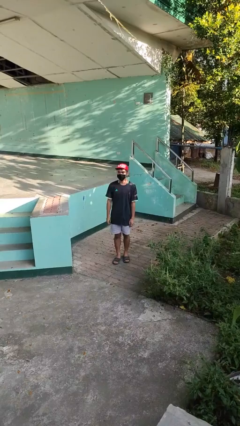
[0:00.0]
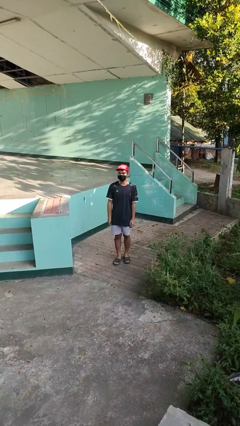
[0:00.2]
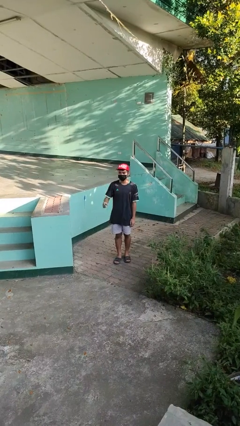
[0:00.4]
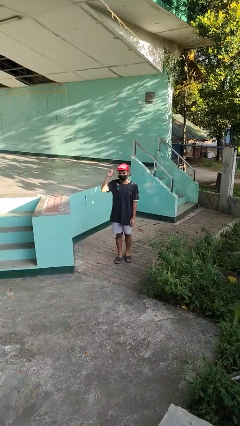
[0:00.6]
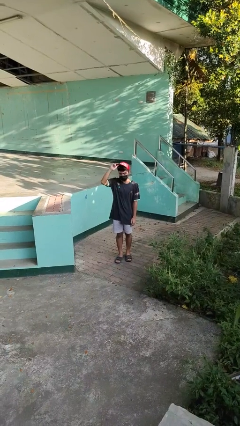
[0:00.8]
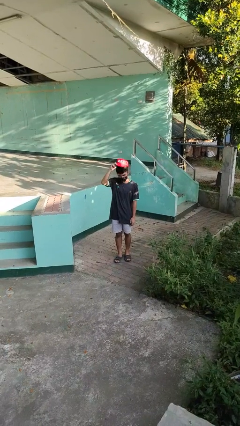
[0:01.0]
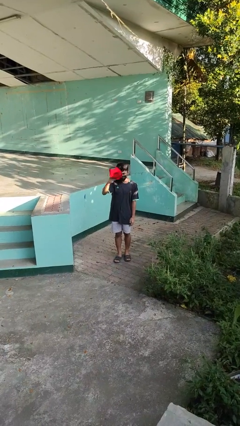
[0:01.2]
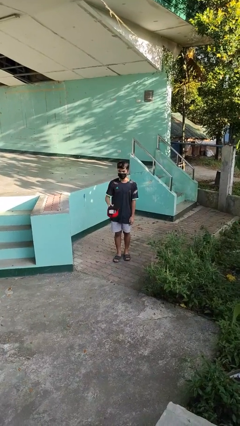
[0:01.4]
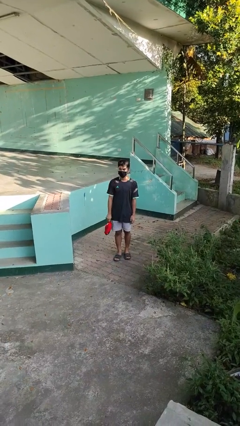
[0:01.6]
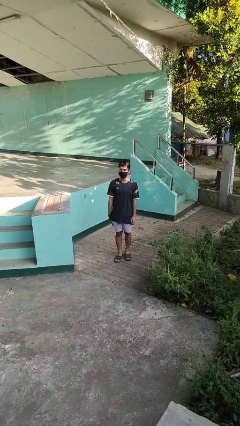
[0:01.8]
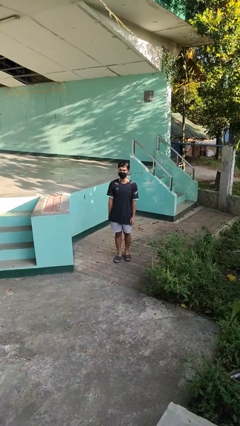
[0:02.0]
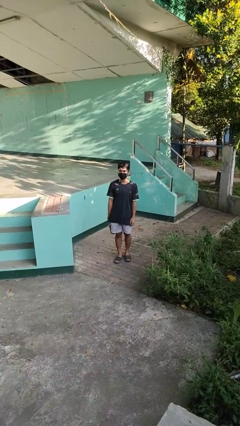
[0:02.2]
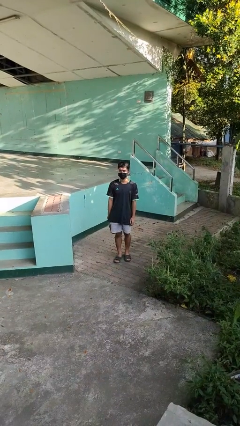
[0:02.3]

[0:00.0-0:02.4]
person takes off hat

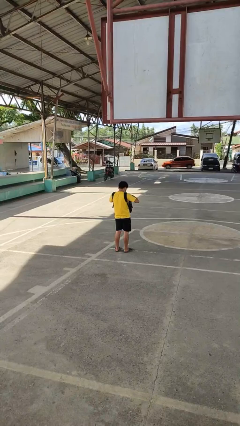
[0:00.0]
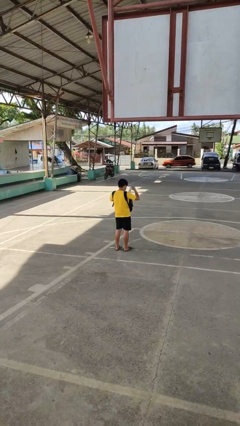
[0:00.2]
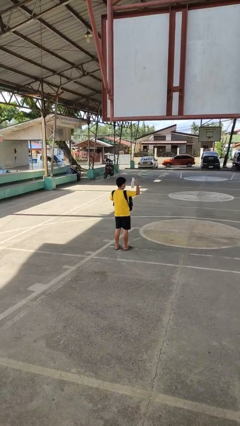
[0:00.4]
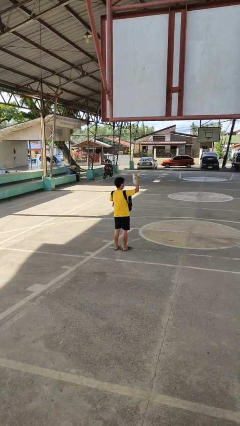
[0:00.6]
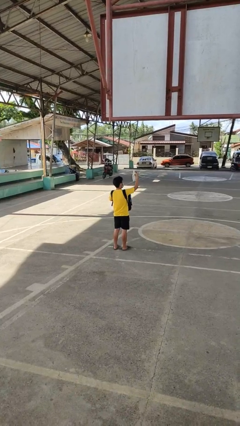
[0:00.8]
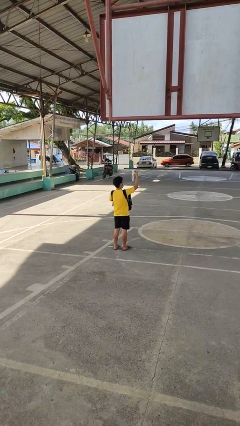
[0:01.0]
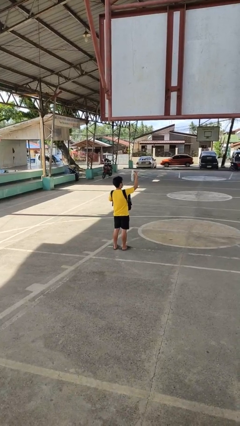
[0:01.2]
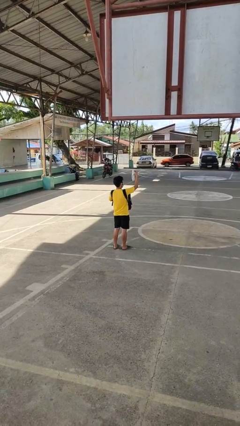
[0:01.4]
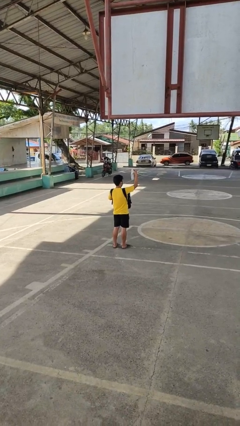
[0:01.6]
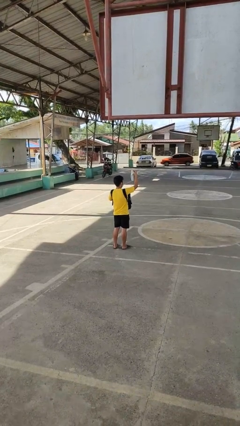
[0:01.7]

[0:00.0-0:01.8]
person takes object from backpack

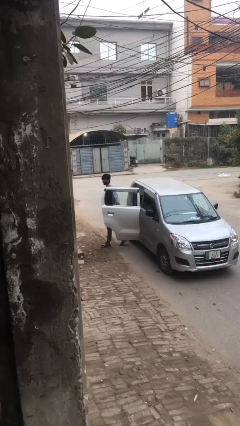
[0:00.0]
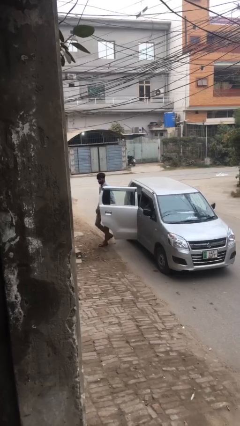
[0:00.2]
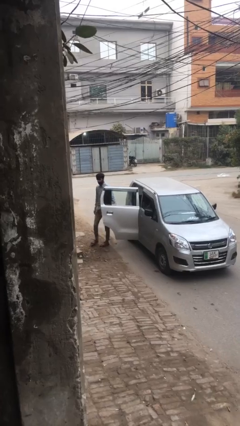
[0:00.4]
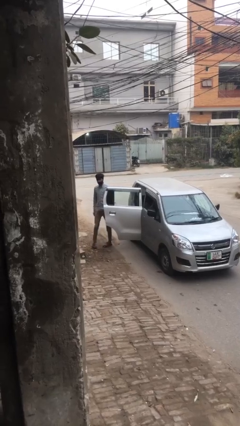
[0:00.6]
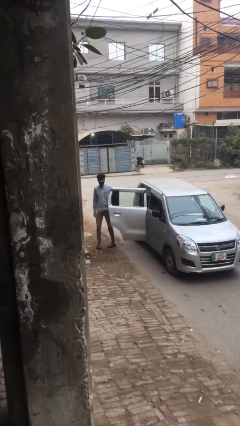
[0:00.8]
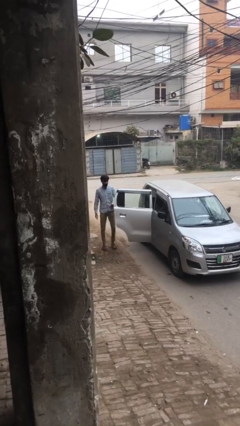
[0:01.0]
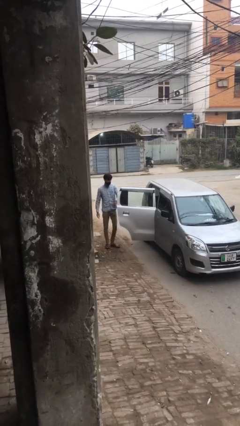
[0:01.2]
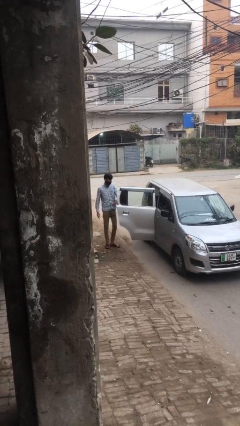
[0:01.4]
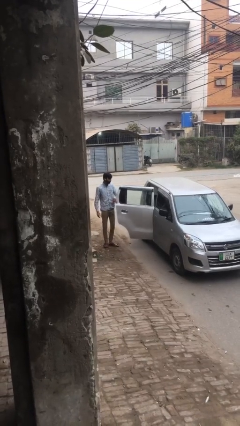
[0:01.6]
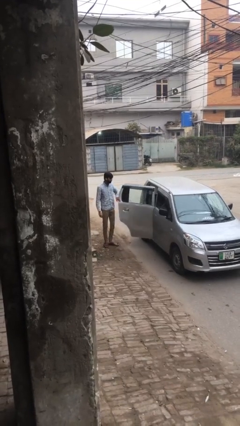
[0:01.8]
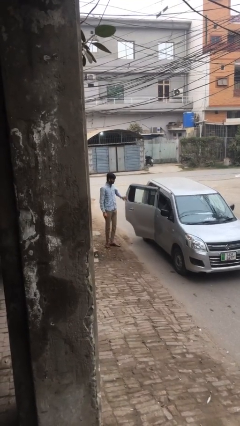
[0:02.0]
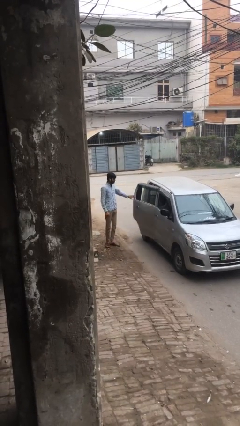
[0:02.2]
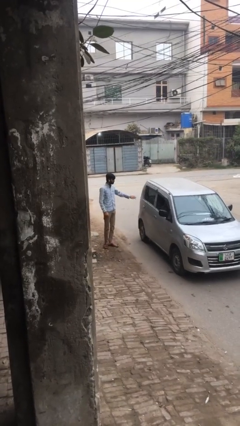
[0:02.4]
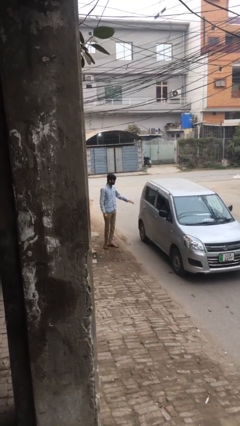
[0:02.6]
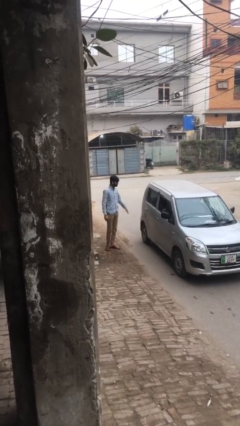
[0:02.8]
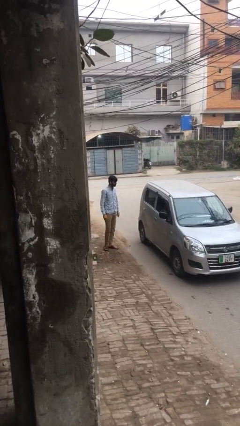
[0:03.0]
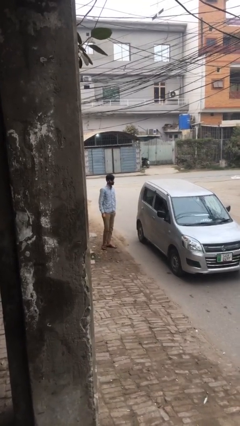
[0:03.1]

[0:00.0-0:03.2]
person closes car door

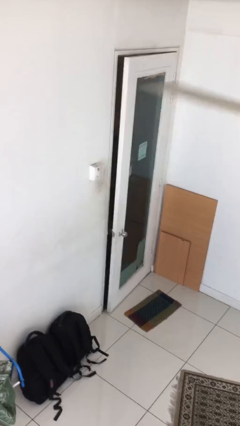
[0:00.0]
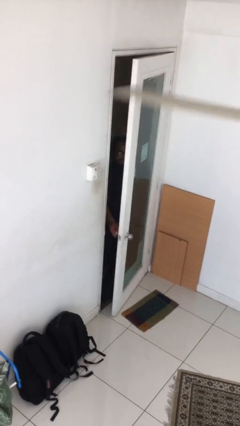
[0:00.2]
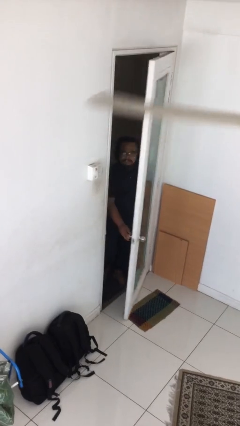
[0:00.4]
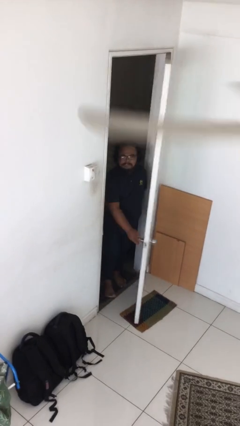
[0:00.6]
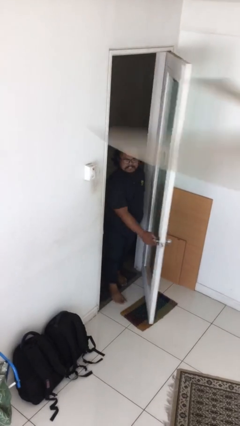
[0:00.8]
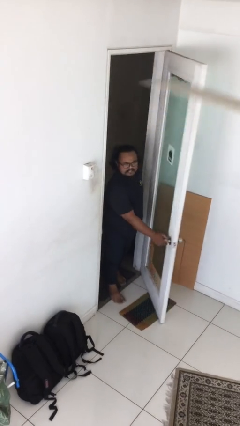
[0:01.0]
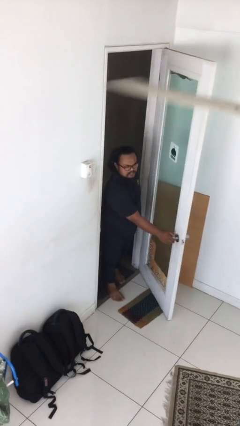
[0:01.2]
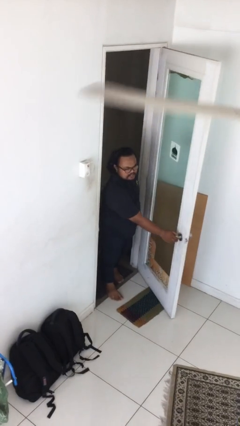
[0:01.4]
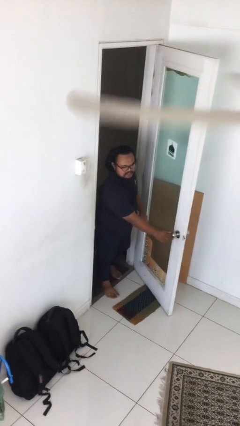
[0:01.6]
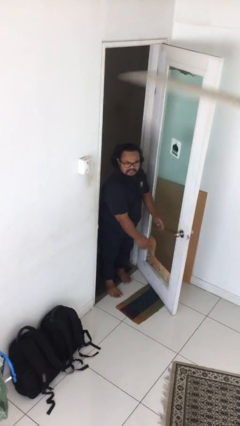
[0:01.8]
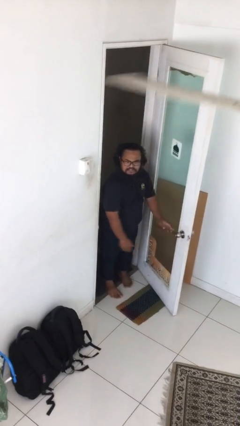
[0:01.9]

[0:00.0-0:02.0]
person opens facility door

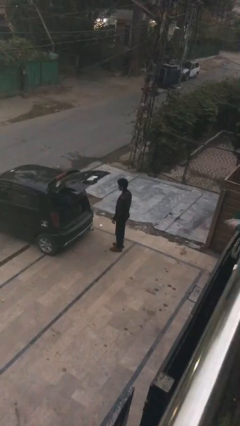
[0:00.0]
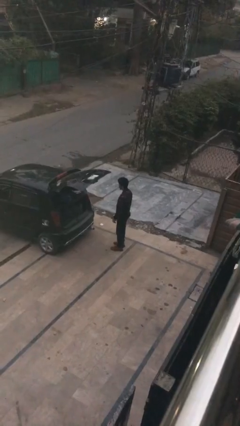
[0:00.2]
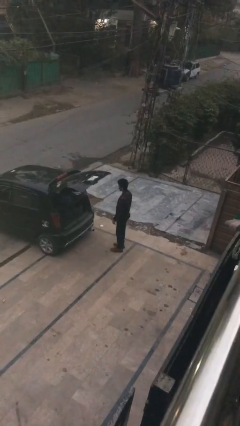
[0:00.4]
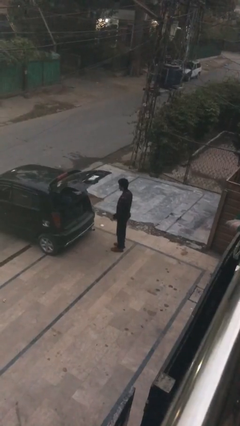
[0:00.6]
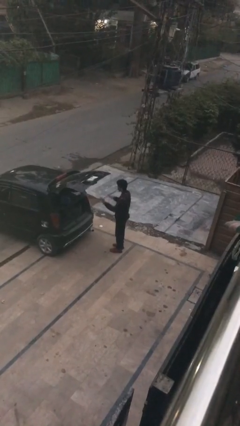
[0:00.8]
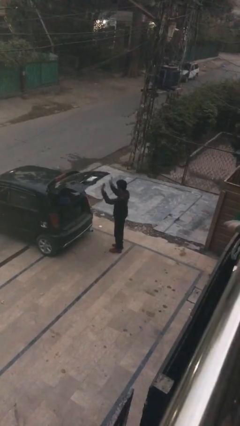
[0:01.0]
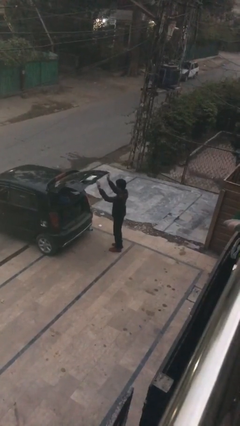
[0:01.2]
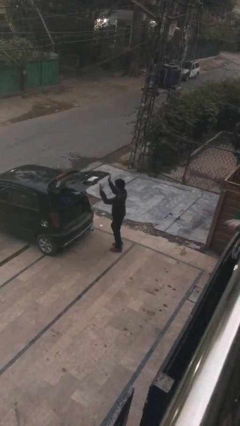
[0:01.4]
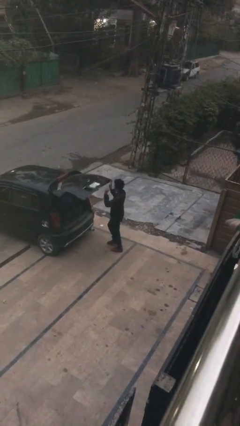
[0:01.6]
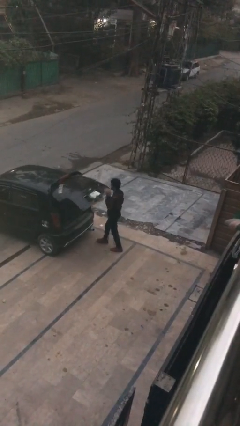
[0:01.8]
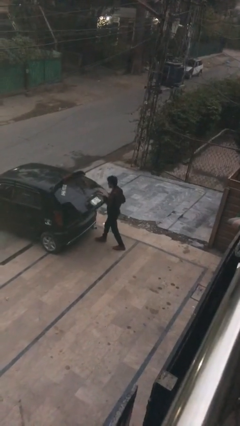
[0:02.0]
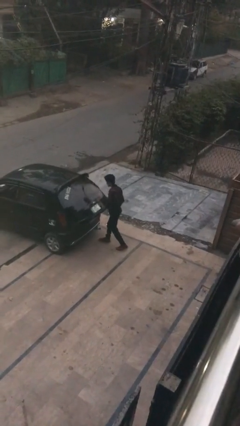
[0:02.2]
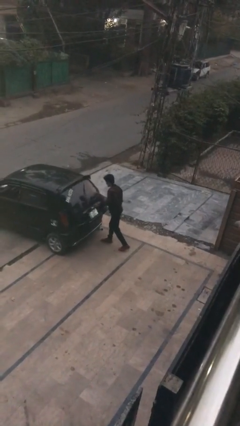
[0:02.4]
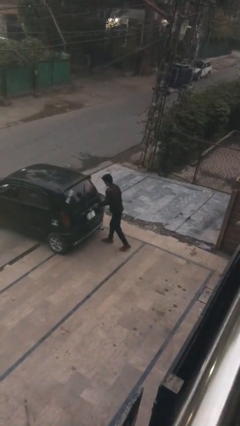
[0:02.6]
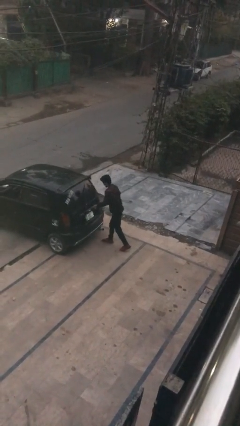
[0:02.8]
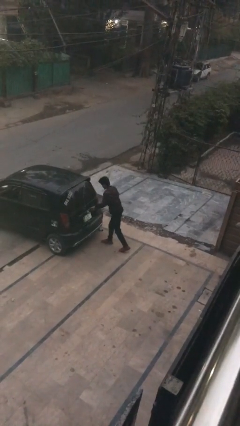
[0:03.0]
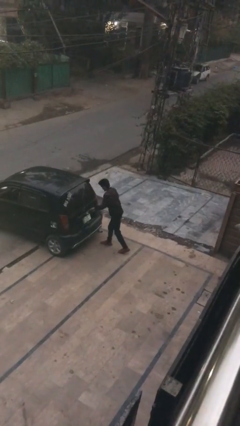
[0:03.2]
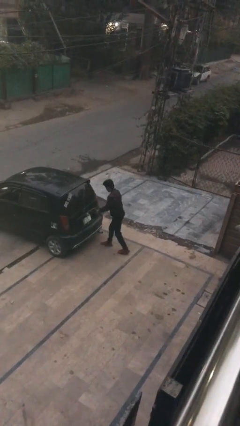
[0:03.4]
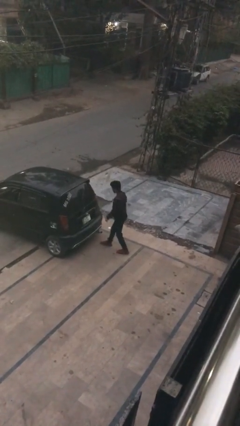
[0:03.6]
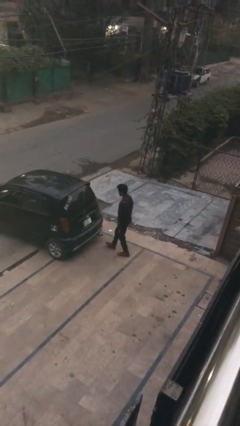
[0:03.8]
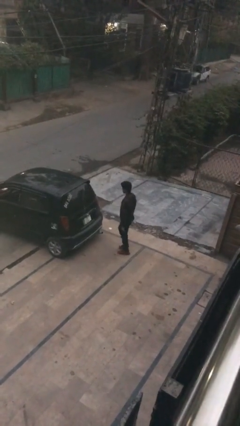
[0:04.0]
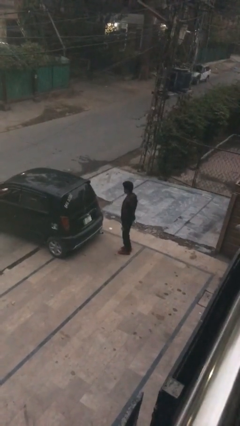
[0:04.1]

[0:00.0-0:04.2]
person closes car trunk

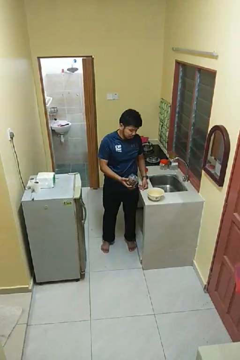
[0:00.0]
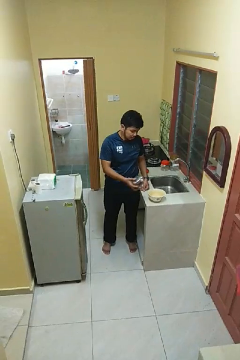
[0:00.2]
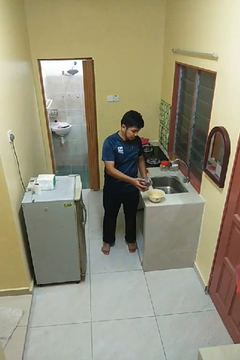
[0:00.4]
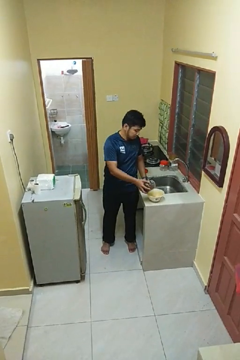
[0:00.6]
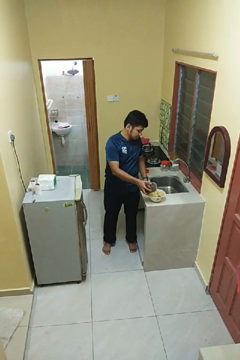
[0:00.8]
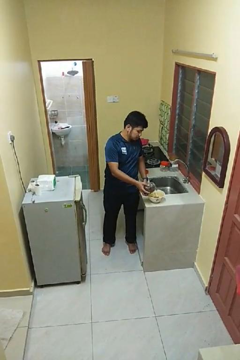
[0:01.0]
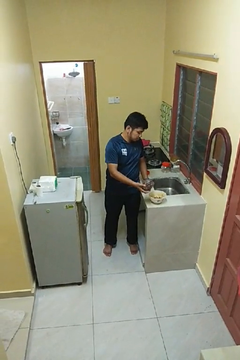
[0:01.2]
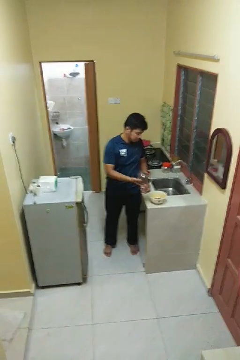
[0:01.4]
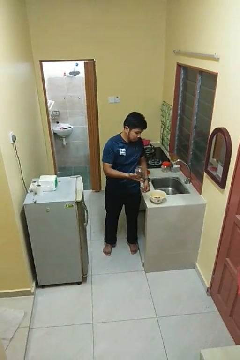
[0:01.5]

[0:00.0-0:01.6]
person pours into bowl

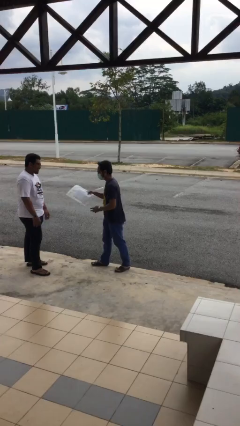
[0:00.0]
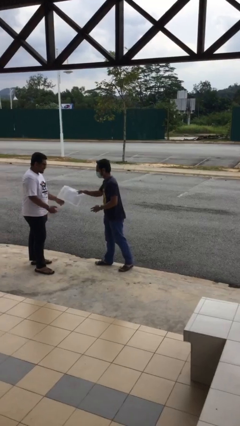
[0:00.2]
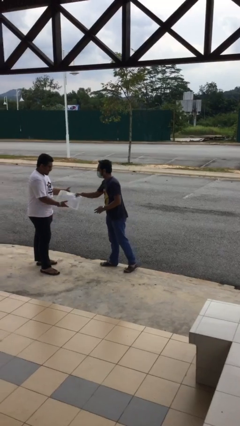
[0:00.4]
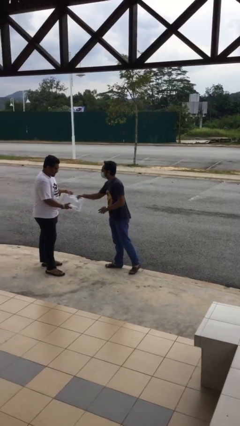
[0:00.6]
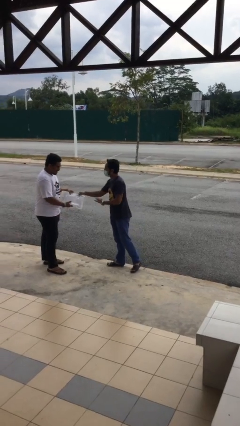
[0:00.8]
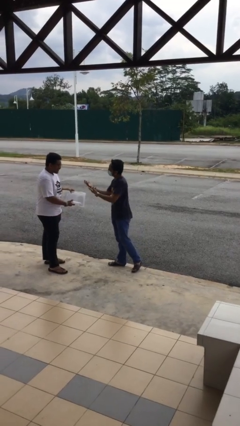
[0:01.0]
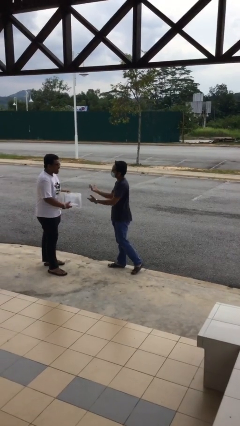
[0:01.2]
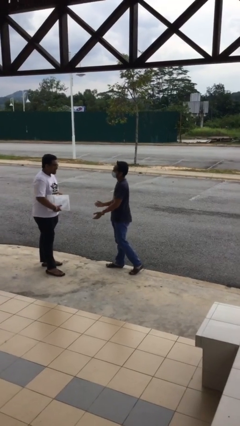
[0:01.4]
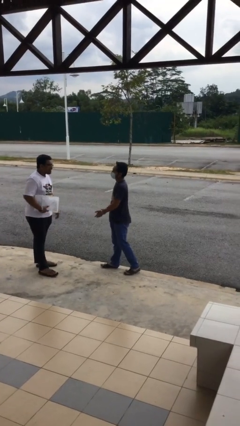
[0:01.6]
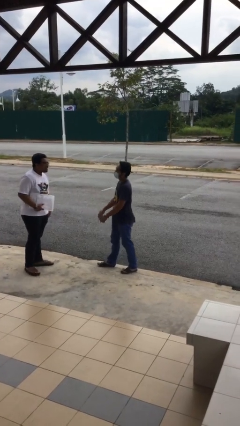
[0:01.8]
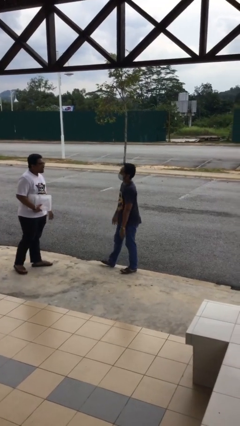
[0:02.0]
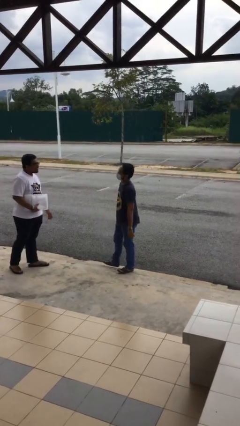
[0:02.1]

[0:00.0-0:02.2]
person transfers object to person

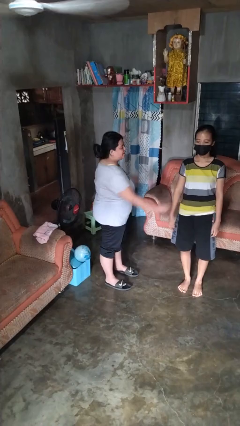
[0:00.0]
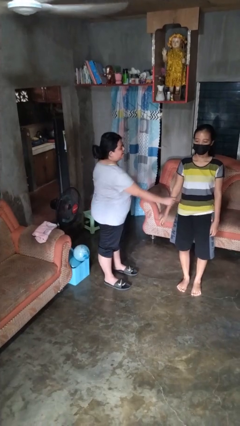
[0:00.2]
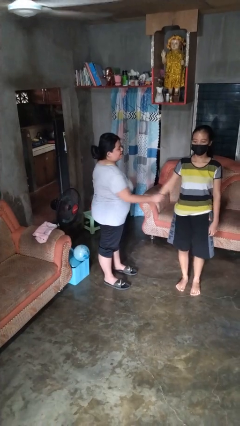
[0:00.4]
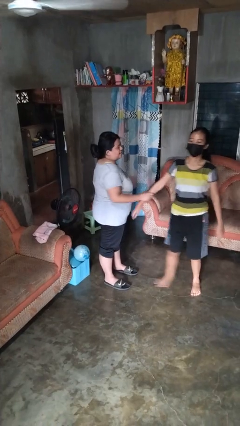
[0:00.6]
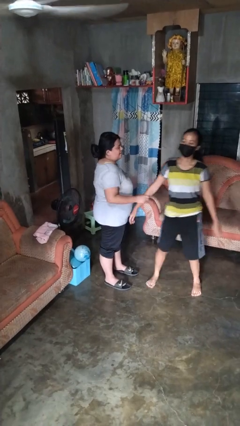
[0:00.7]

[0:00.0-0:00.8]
person grabs person by forearm
